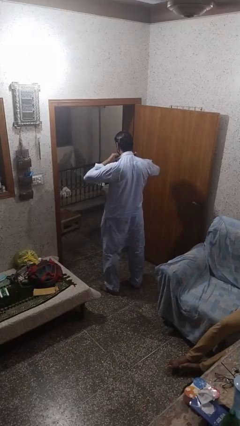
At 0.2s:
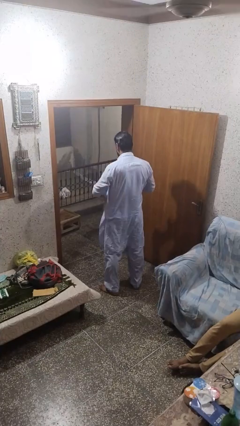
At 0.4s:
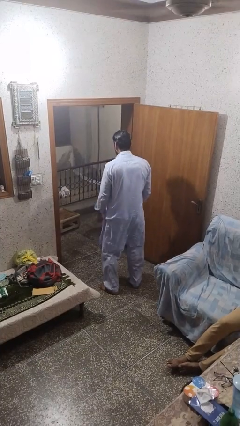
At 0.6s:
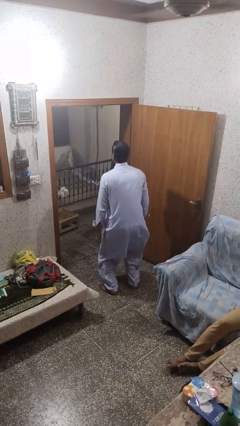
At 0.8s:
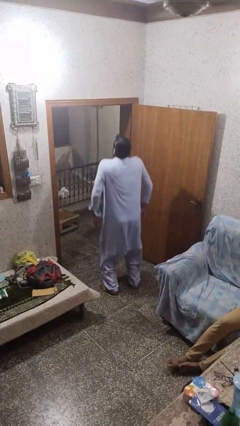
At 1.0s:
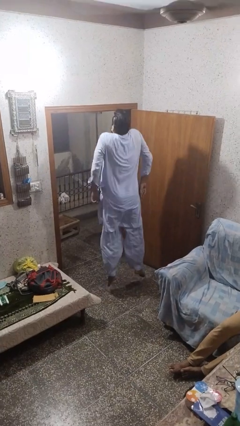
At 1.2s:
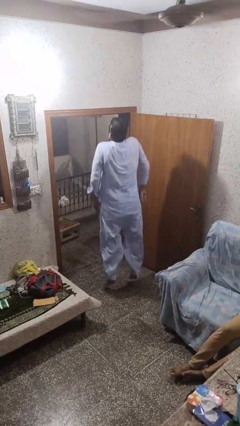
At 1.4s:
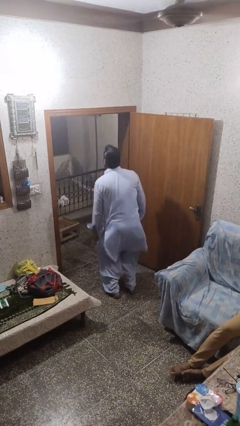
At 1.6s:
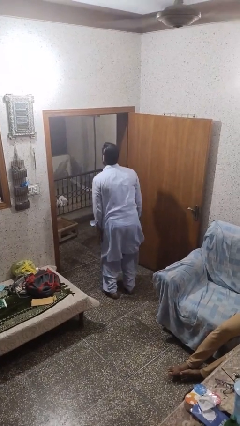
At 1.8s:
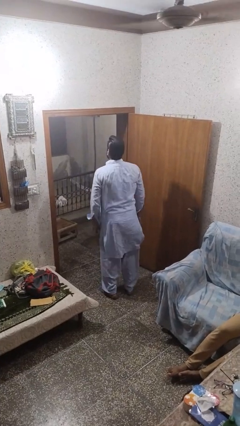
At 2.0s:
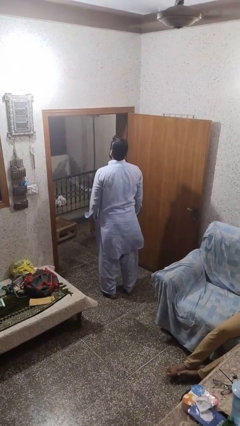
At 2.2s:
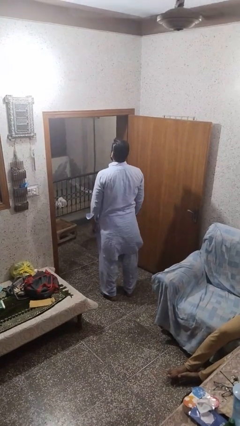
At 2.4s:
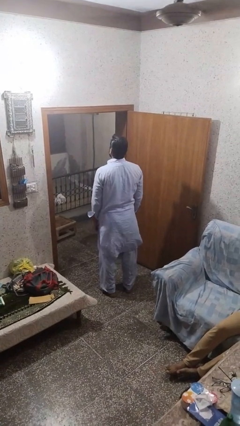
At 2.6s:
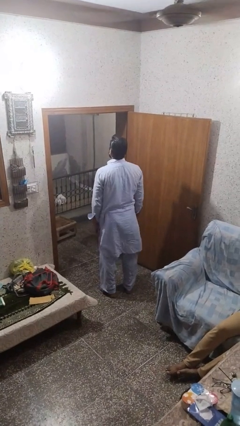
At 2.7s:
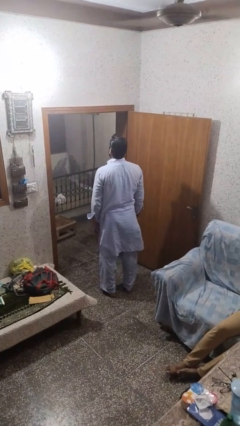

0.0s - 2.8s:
person jumps

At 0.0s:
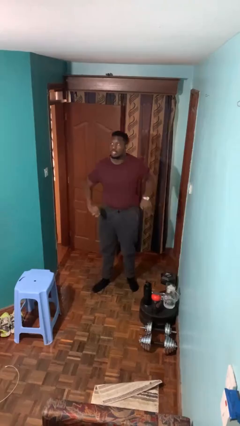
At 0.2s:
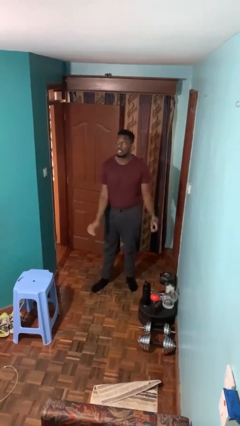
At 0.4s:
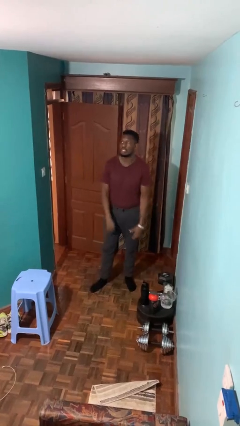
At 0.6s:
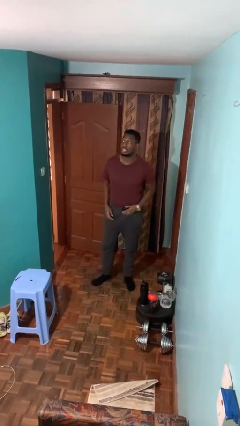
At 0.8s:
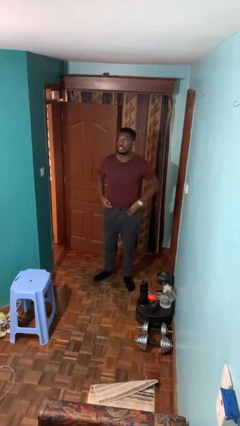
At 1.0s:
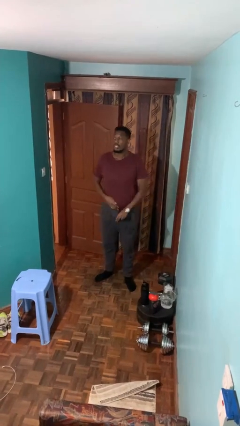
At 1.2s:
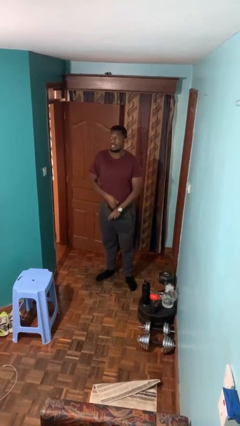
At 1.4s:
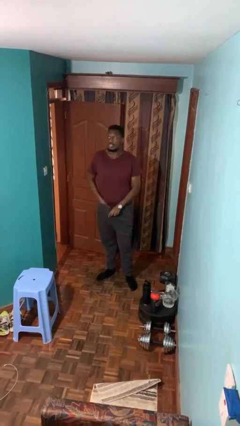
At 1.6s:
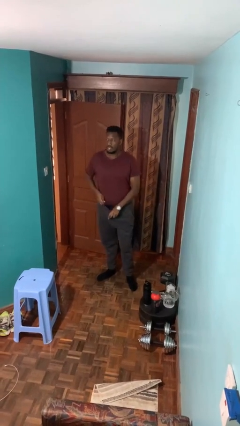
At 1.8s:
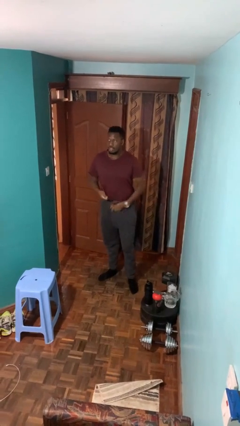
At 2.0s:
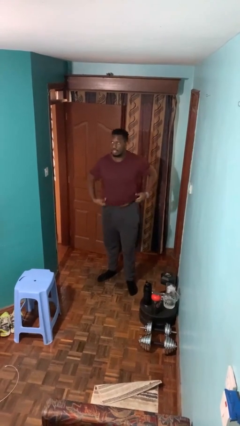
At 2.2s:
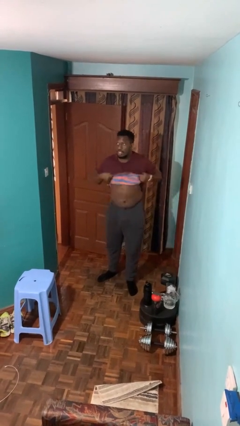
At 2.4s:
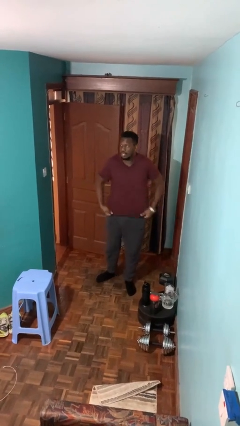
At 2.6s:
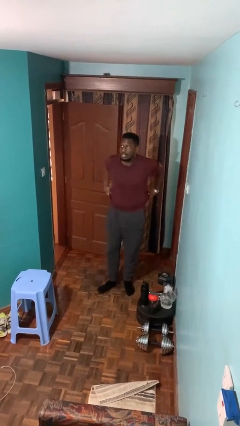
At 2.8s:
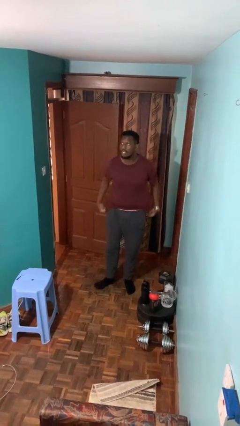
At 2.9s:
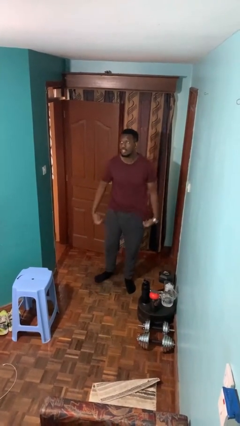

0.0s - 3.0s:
person untucks shirt

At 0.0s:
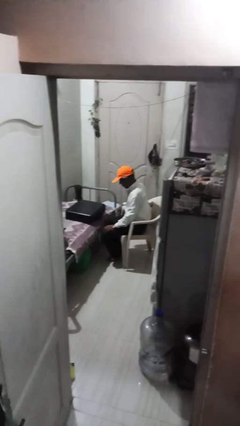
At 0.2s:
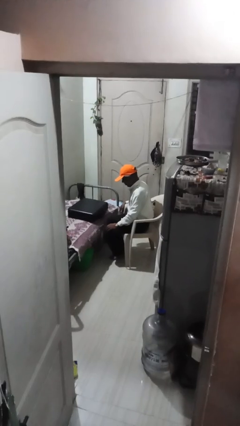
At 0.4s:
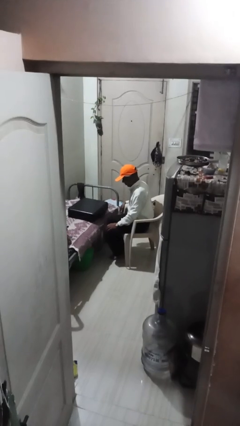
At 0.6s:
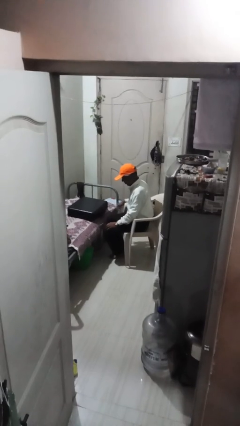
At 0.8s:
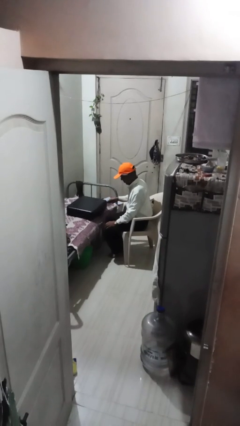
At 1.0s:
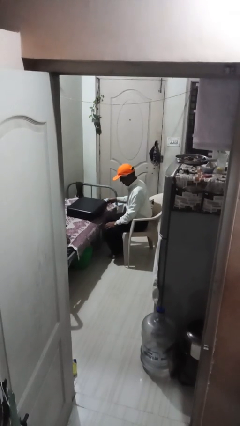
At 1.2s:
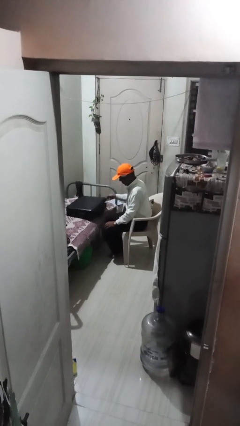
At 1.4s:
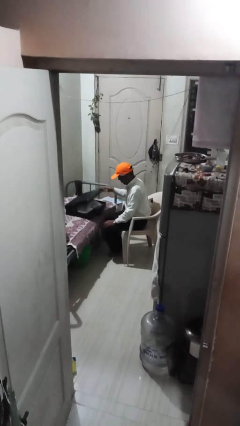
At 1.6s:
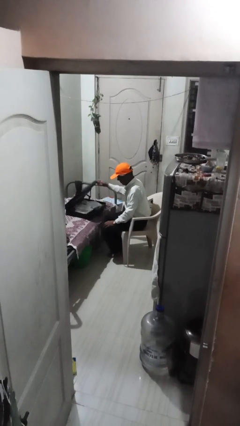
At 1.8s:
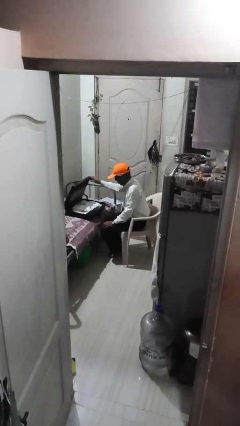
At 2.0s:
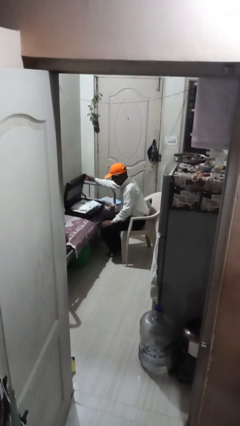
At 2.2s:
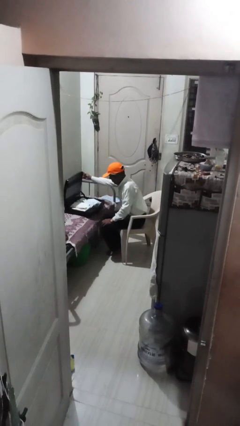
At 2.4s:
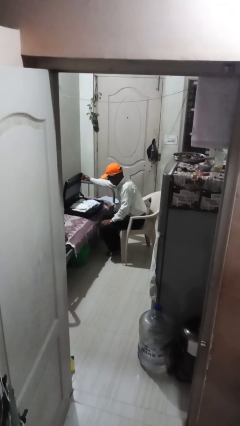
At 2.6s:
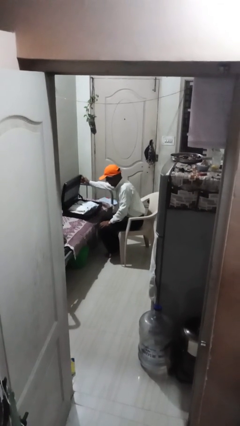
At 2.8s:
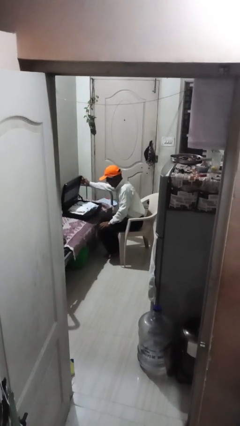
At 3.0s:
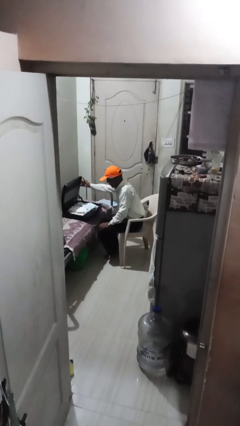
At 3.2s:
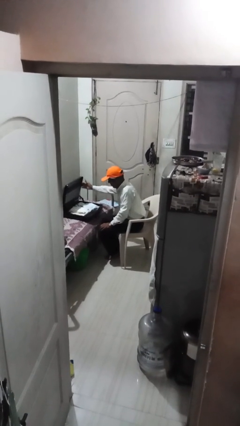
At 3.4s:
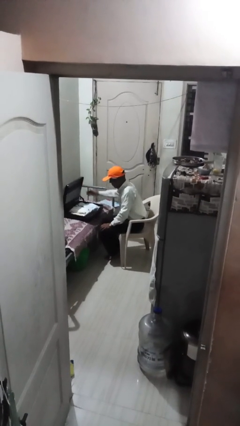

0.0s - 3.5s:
person opens suitcase

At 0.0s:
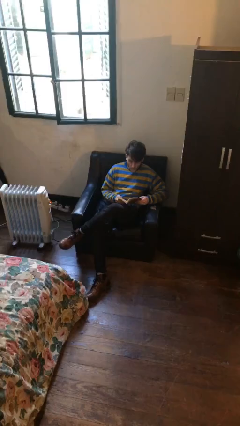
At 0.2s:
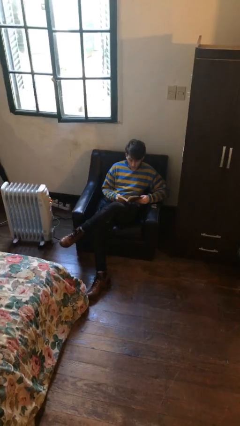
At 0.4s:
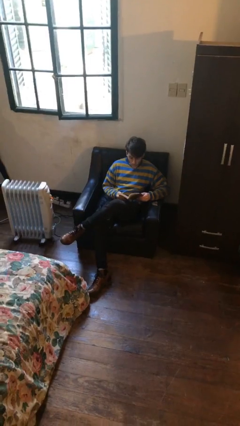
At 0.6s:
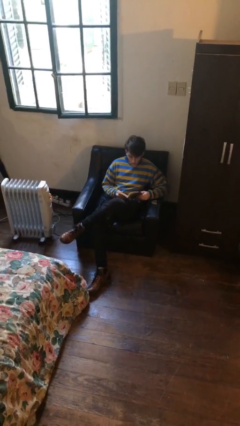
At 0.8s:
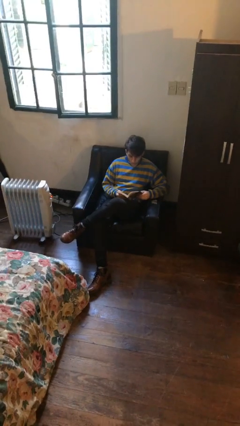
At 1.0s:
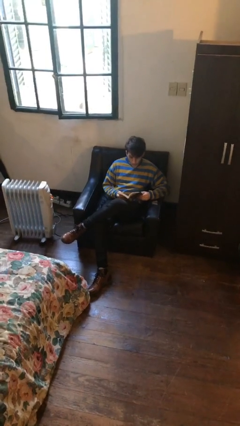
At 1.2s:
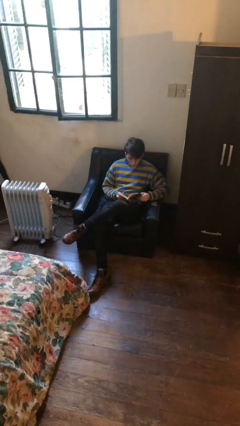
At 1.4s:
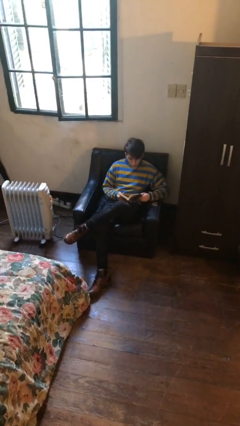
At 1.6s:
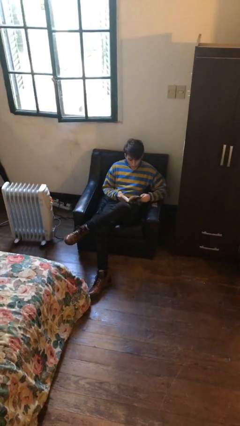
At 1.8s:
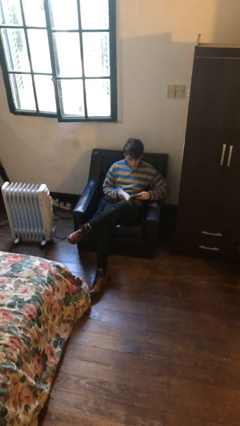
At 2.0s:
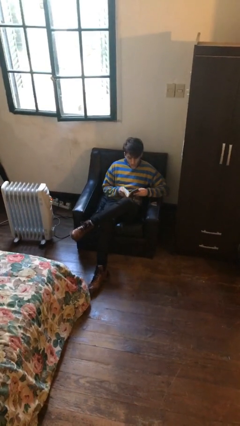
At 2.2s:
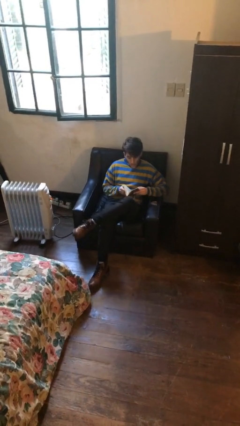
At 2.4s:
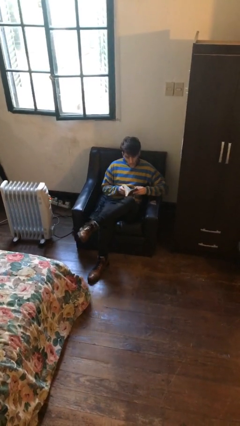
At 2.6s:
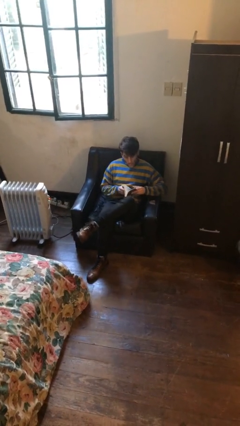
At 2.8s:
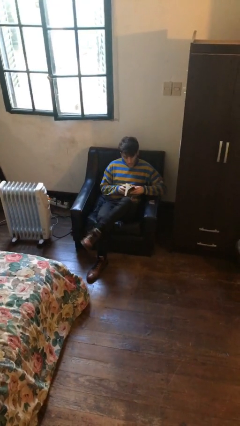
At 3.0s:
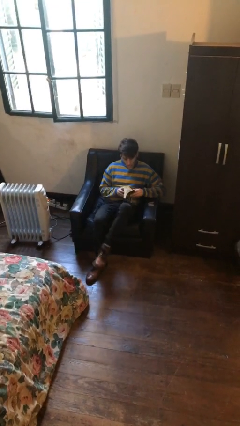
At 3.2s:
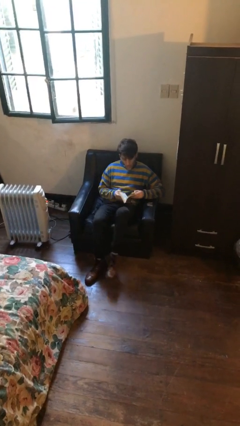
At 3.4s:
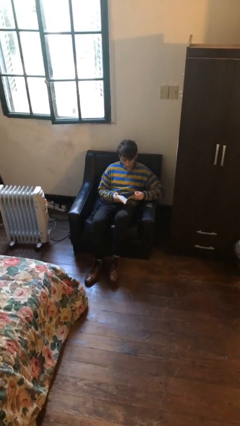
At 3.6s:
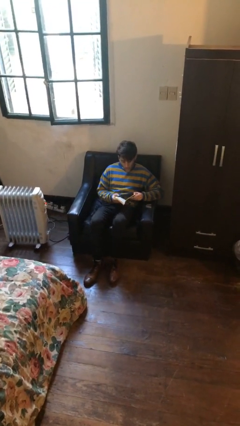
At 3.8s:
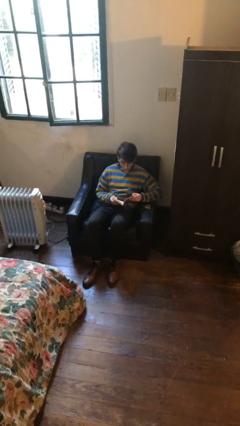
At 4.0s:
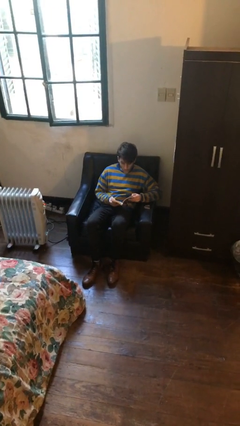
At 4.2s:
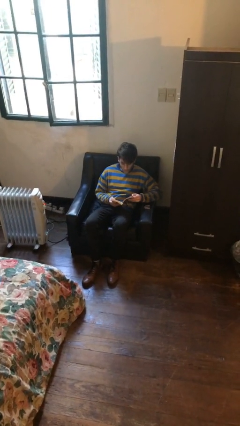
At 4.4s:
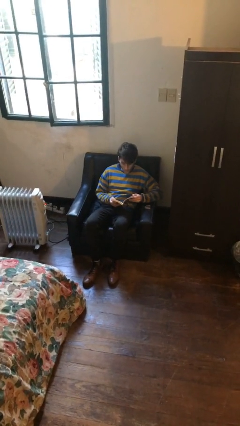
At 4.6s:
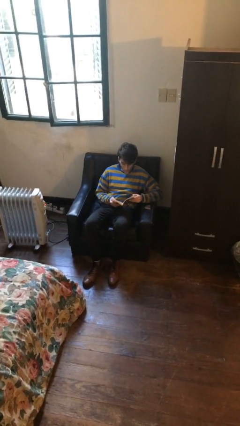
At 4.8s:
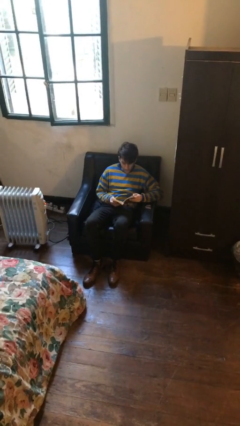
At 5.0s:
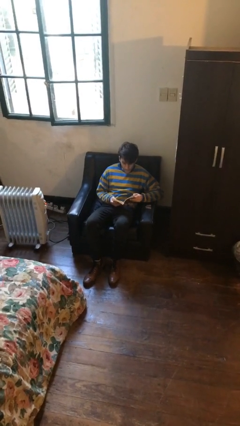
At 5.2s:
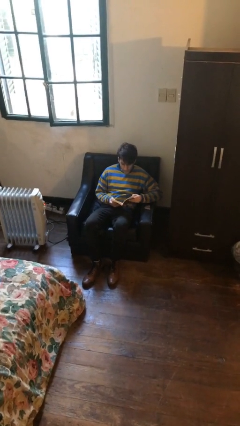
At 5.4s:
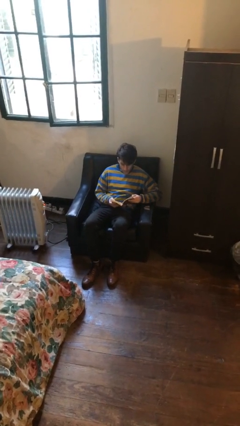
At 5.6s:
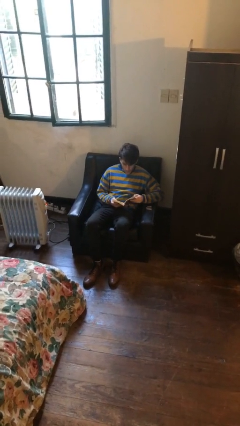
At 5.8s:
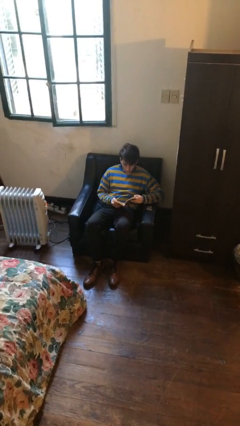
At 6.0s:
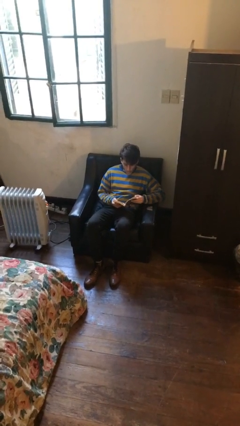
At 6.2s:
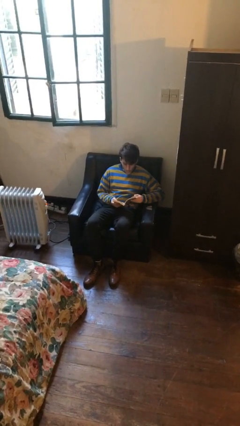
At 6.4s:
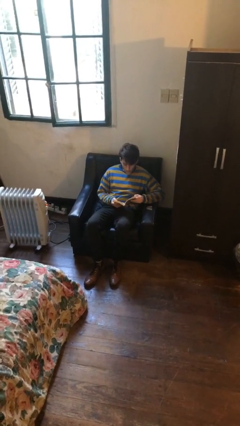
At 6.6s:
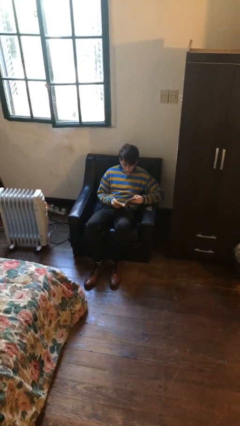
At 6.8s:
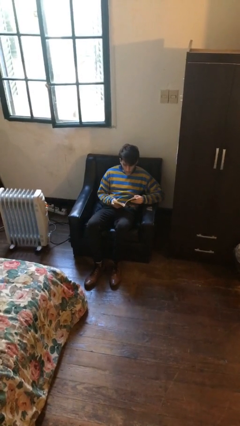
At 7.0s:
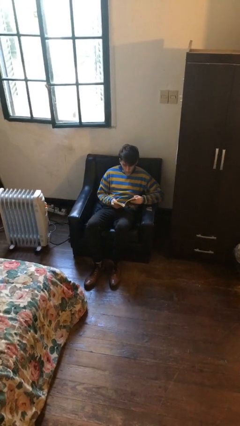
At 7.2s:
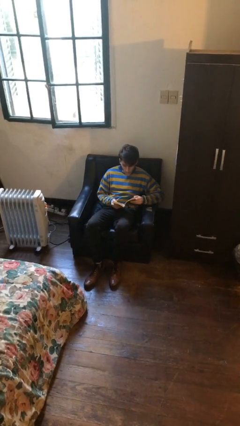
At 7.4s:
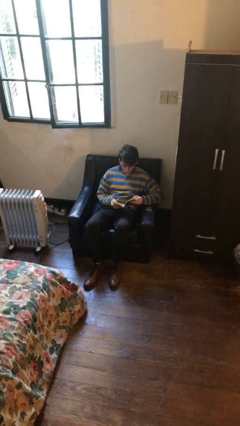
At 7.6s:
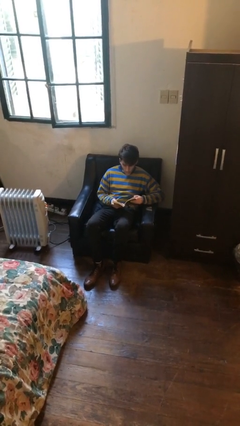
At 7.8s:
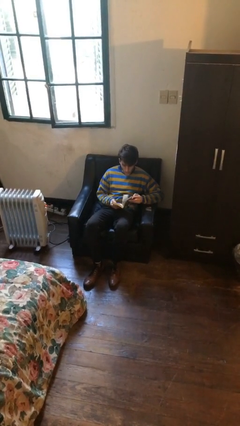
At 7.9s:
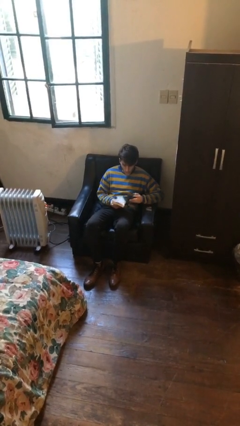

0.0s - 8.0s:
person reads document

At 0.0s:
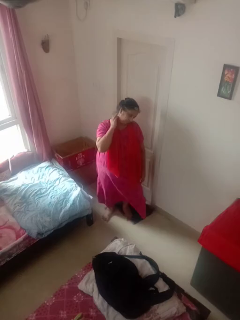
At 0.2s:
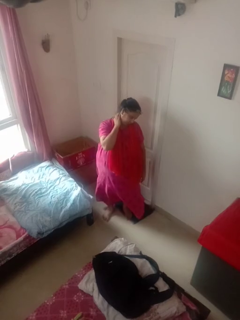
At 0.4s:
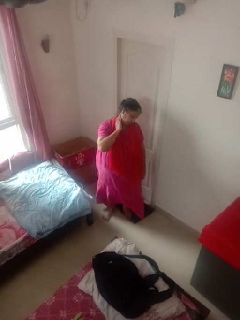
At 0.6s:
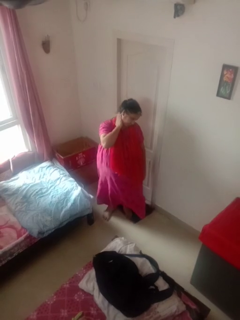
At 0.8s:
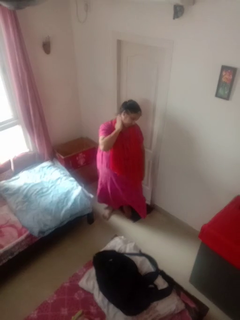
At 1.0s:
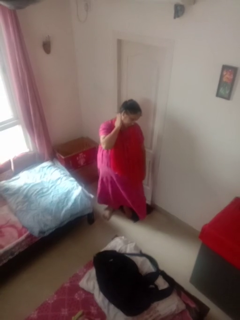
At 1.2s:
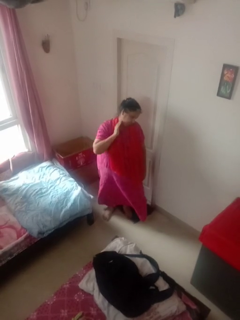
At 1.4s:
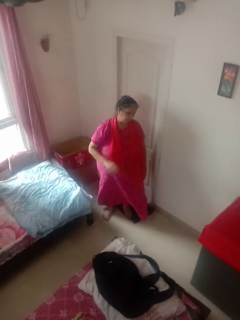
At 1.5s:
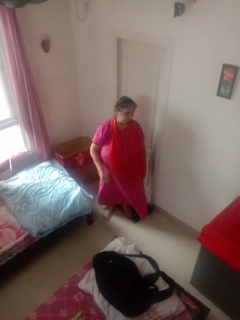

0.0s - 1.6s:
person rubs neck
